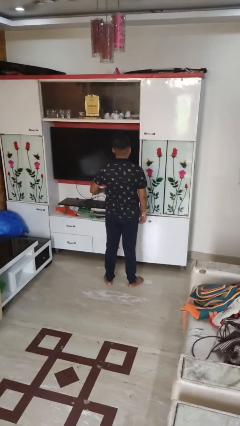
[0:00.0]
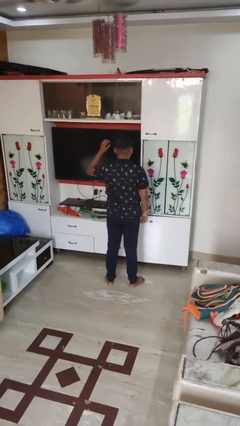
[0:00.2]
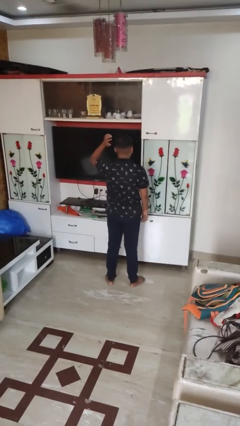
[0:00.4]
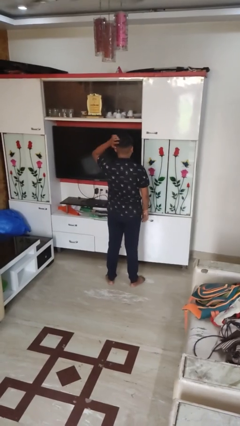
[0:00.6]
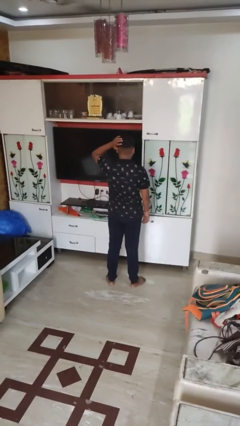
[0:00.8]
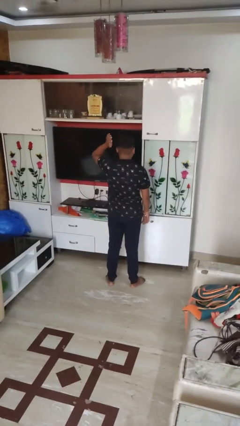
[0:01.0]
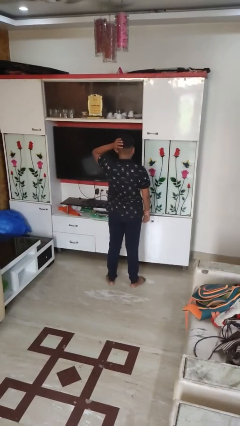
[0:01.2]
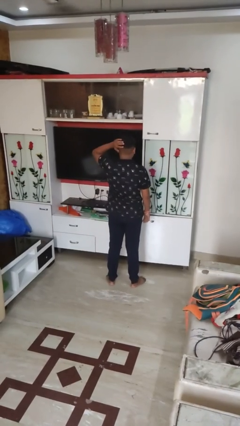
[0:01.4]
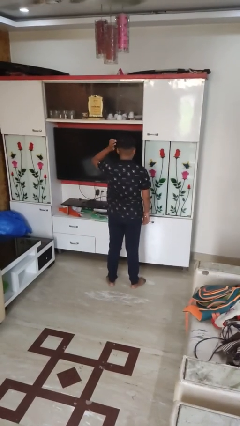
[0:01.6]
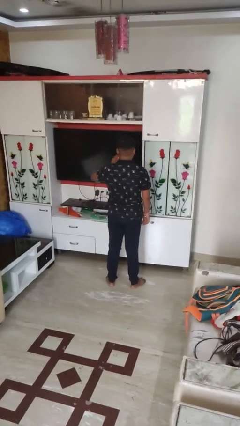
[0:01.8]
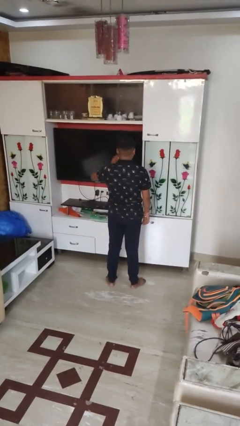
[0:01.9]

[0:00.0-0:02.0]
person pats head

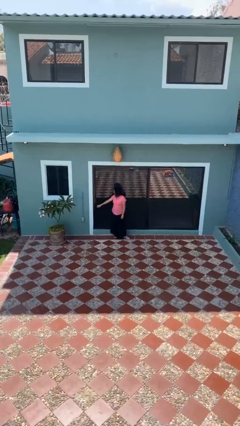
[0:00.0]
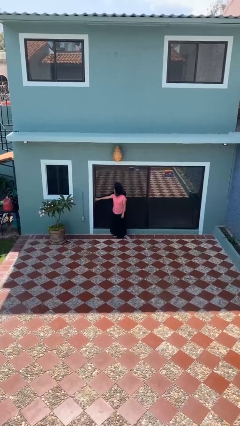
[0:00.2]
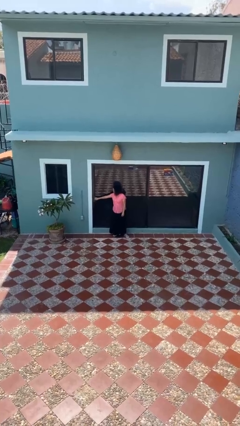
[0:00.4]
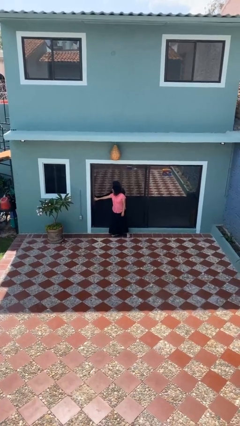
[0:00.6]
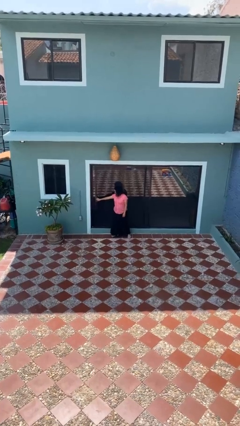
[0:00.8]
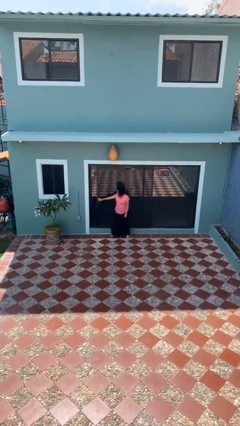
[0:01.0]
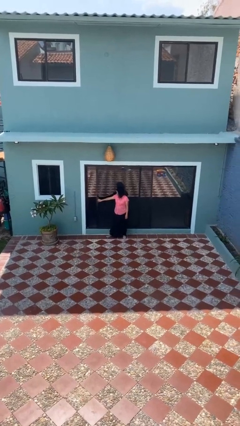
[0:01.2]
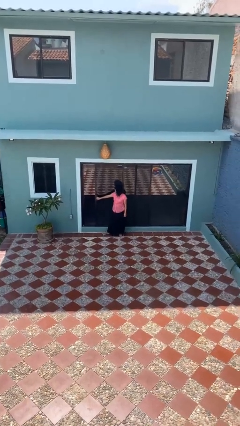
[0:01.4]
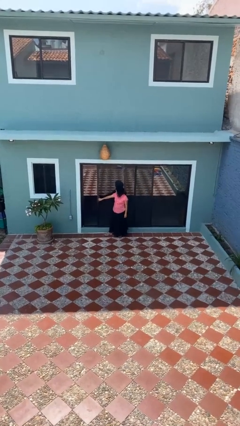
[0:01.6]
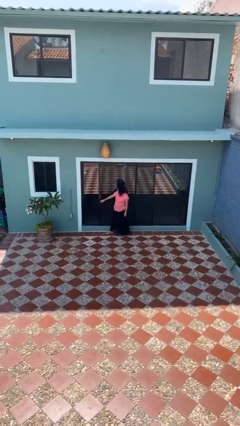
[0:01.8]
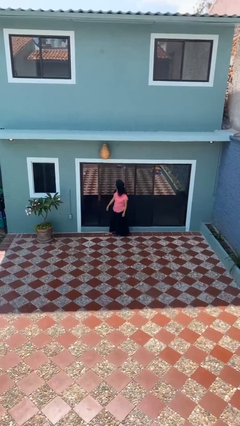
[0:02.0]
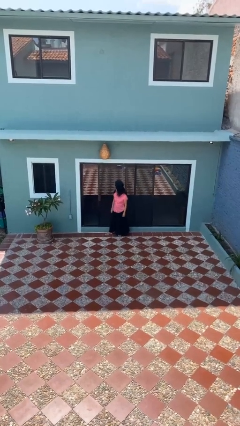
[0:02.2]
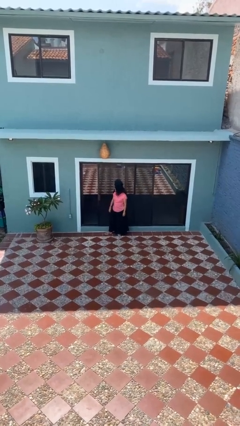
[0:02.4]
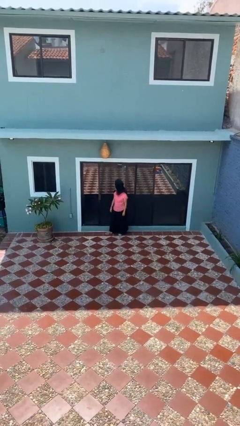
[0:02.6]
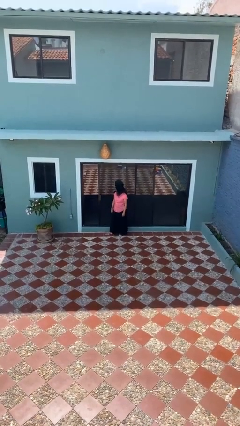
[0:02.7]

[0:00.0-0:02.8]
person opens sliding door

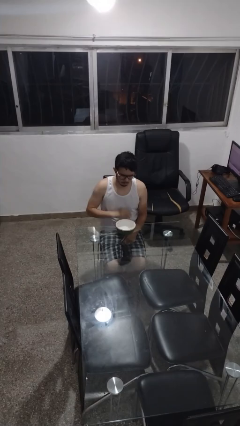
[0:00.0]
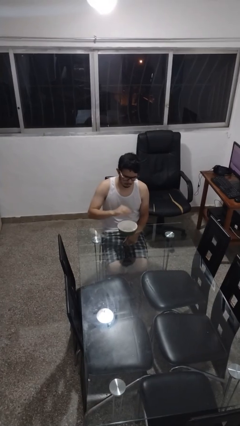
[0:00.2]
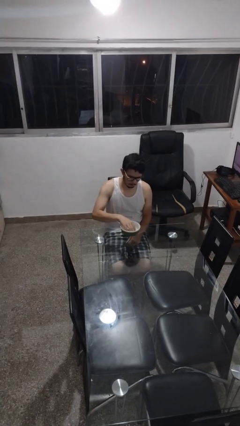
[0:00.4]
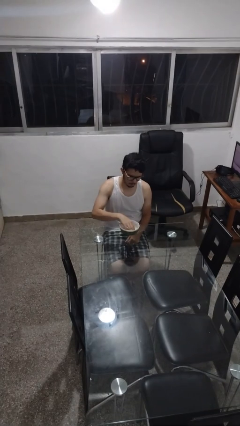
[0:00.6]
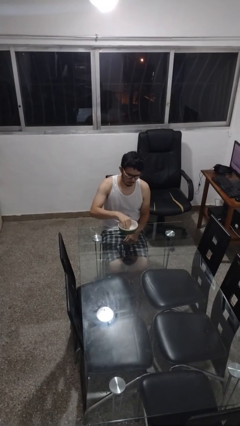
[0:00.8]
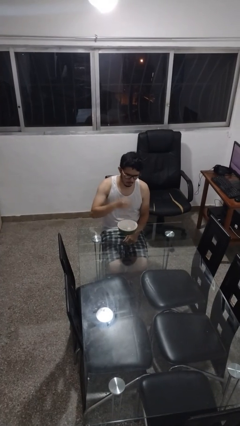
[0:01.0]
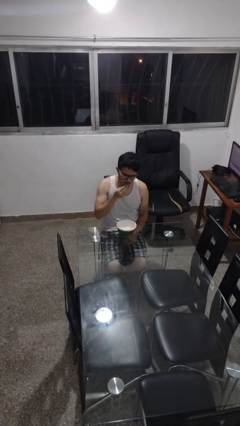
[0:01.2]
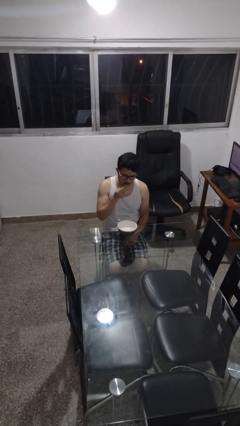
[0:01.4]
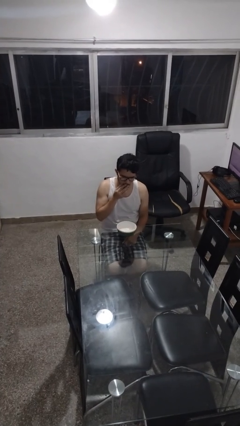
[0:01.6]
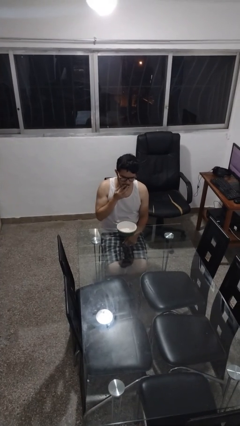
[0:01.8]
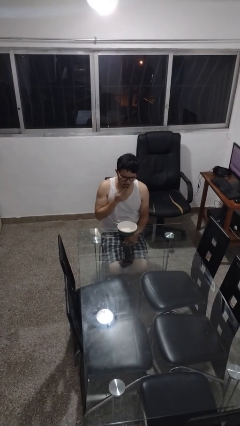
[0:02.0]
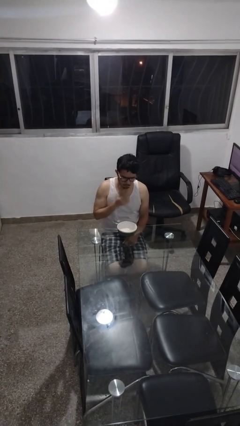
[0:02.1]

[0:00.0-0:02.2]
person eats with hands

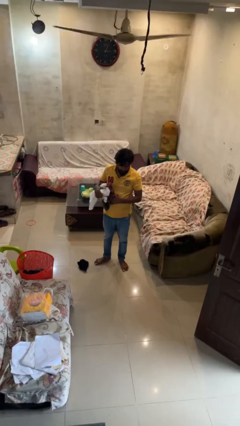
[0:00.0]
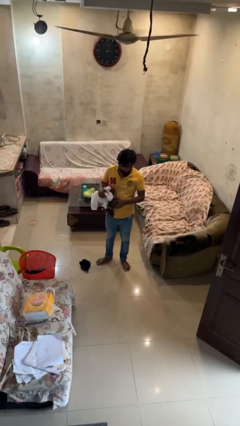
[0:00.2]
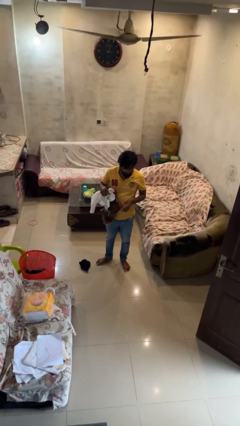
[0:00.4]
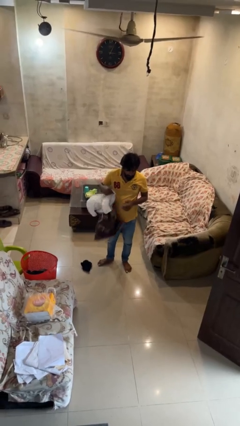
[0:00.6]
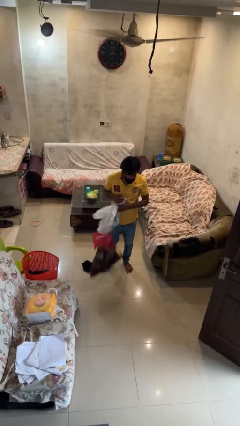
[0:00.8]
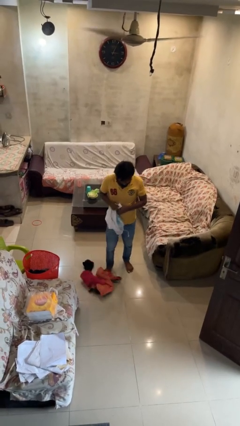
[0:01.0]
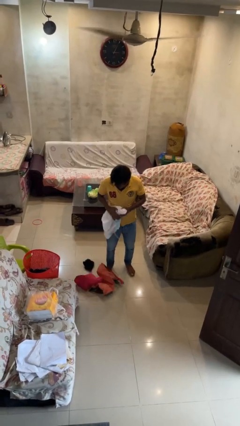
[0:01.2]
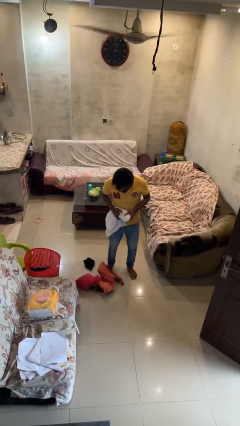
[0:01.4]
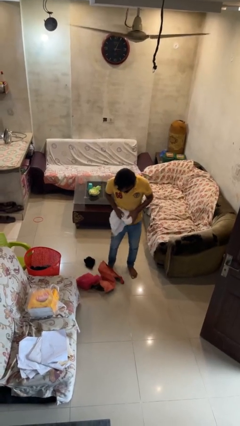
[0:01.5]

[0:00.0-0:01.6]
person drops object

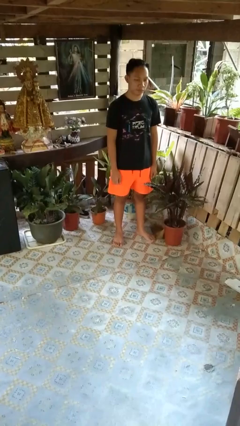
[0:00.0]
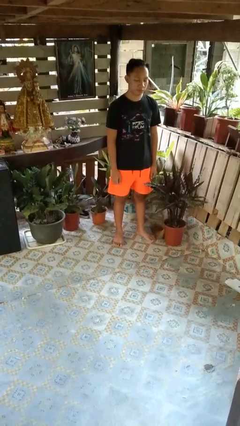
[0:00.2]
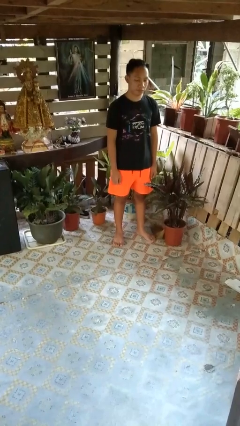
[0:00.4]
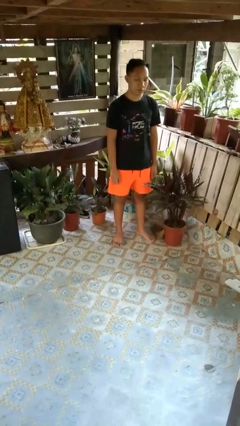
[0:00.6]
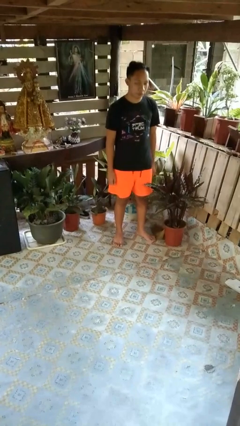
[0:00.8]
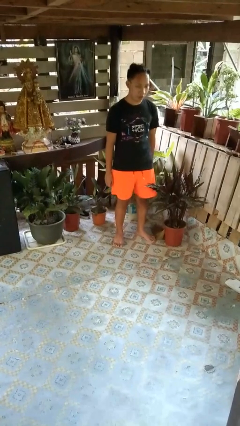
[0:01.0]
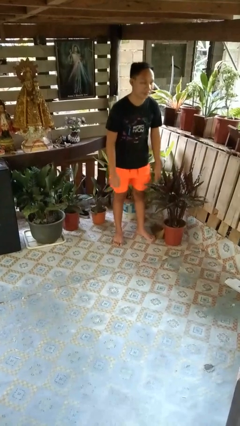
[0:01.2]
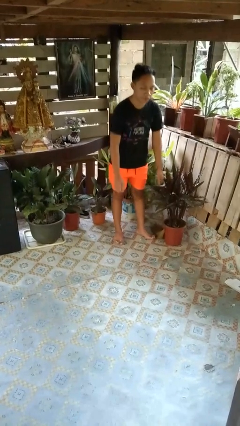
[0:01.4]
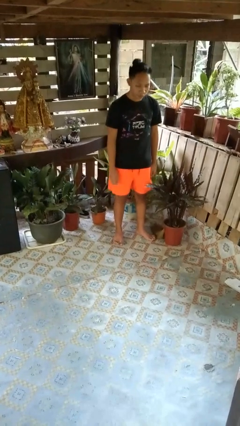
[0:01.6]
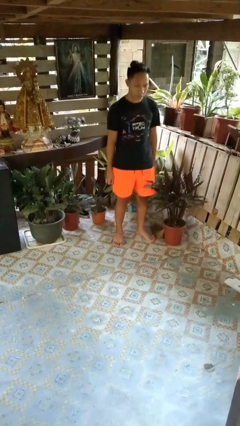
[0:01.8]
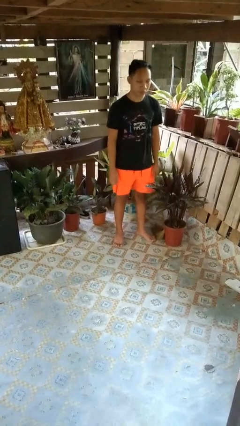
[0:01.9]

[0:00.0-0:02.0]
person wiggles hips

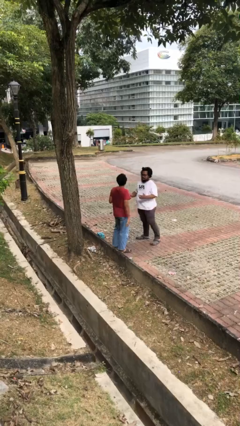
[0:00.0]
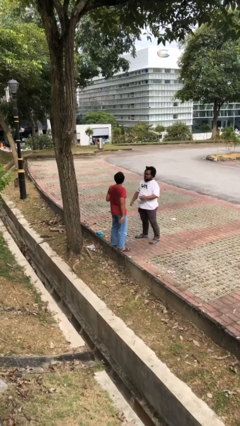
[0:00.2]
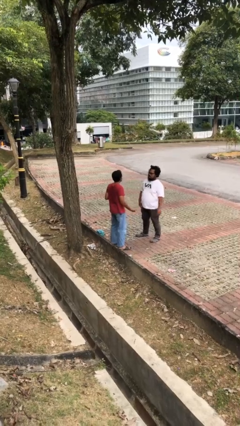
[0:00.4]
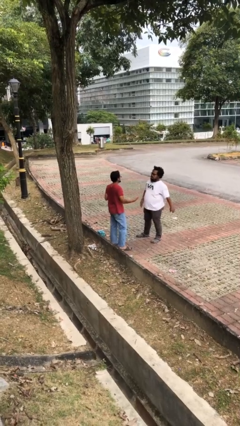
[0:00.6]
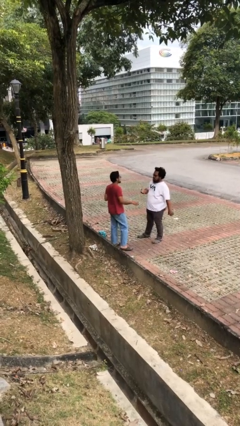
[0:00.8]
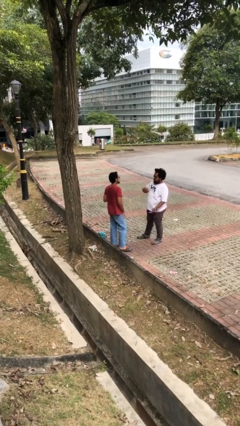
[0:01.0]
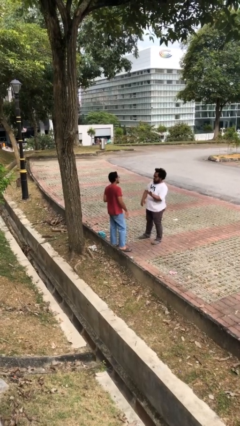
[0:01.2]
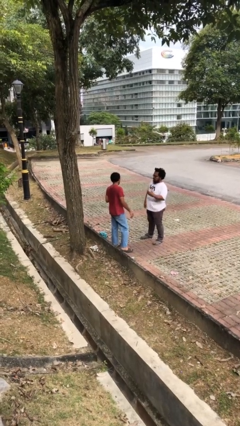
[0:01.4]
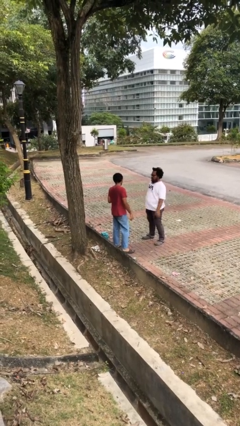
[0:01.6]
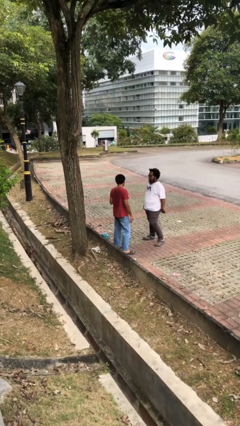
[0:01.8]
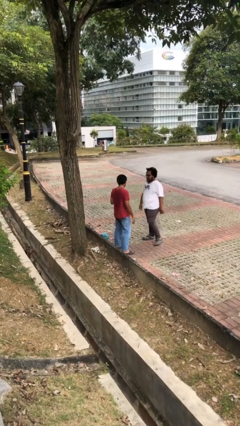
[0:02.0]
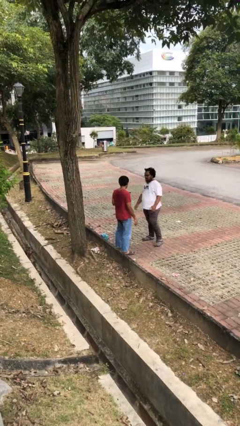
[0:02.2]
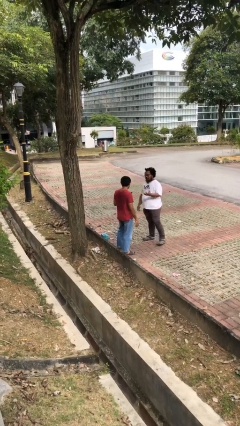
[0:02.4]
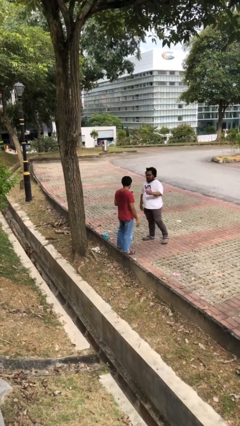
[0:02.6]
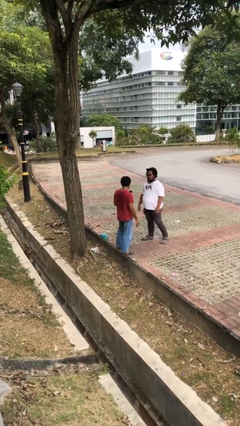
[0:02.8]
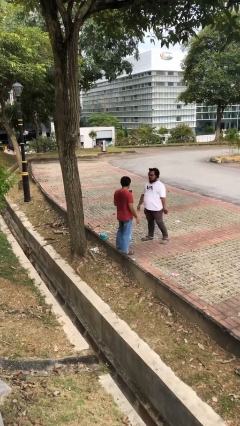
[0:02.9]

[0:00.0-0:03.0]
person talks to person

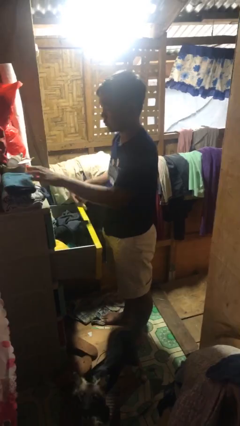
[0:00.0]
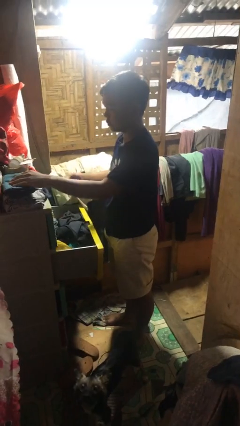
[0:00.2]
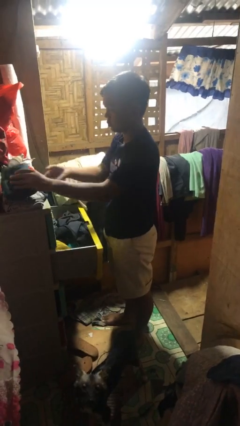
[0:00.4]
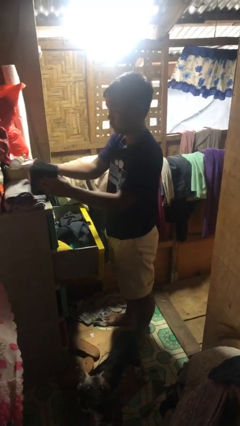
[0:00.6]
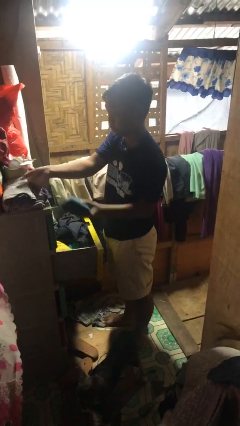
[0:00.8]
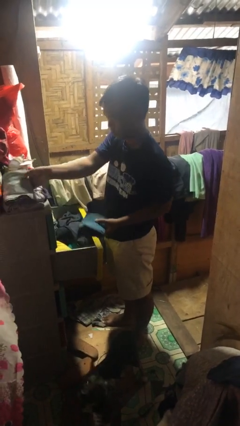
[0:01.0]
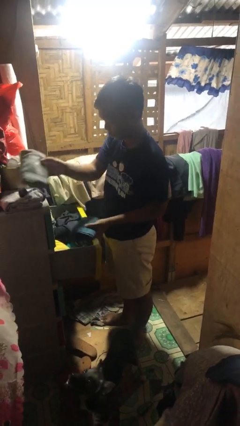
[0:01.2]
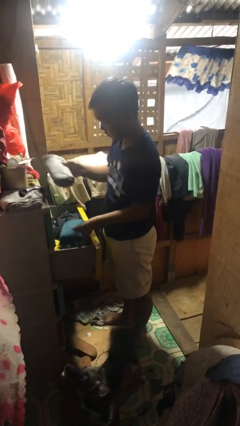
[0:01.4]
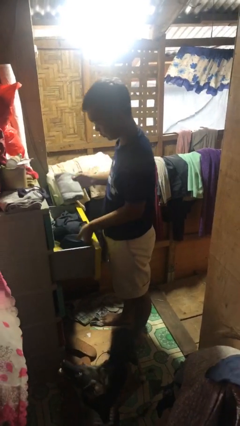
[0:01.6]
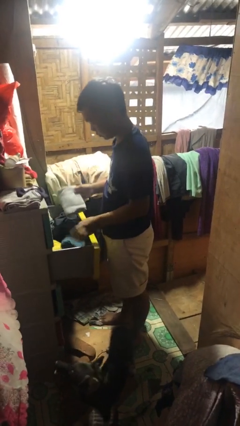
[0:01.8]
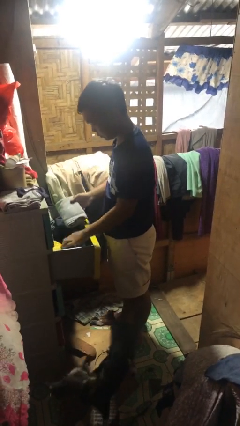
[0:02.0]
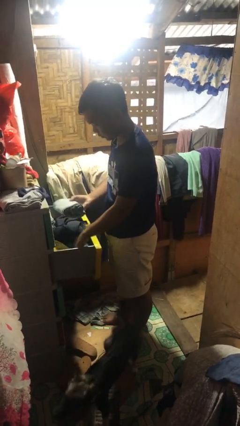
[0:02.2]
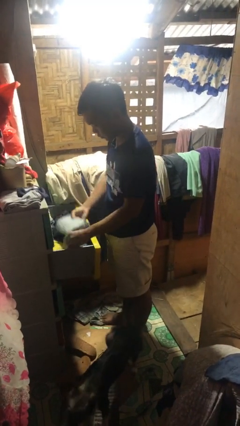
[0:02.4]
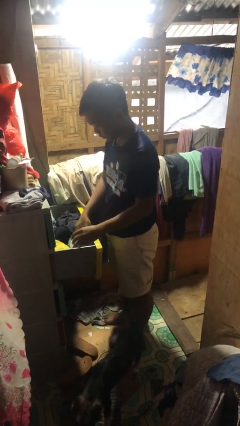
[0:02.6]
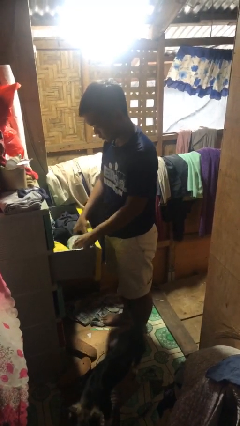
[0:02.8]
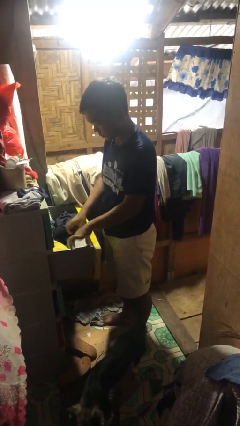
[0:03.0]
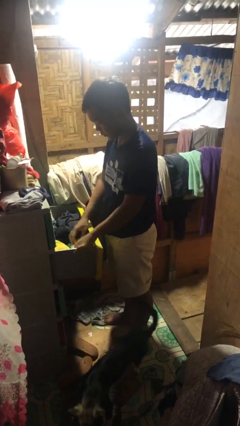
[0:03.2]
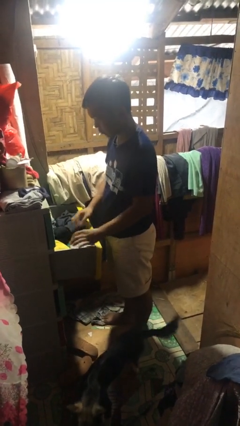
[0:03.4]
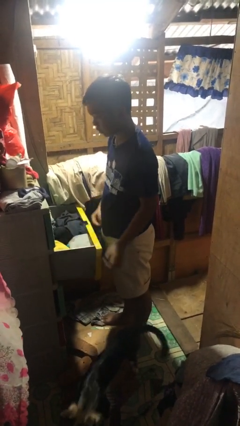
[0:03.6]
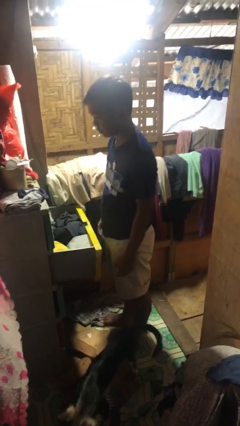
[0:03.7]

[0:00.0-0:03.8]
person puts clothes into dresser
